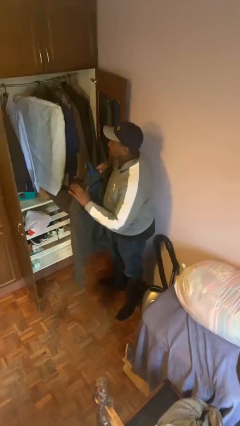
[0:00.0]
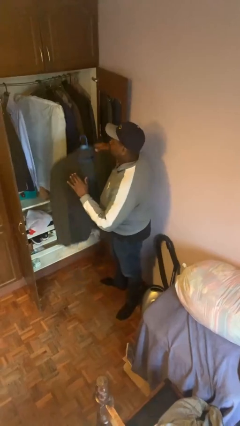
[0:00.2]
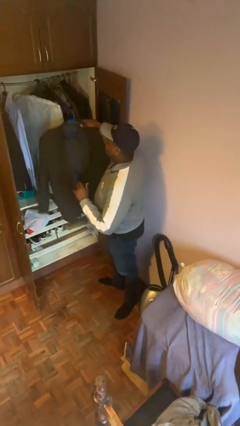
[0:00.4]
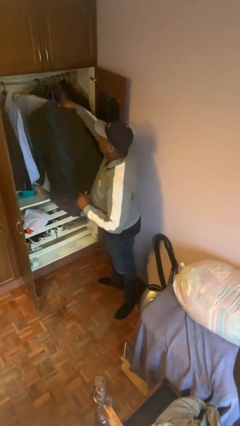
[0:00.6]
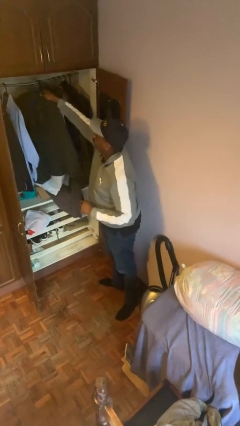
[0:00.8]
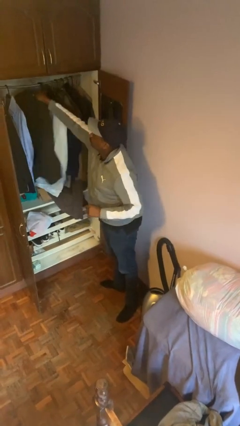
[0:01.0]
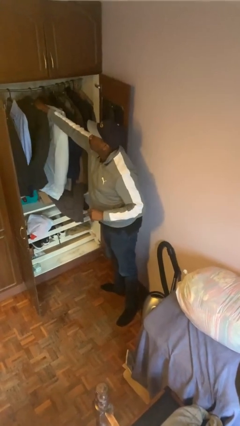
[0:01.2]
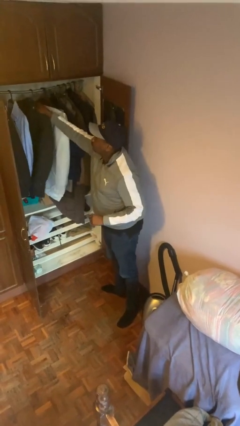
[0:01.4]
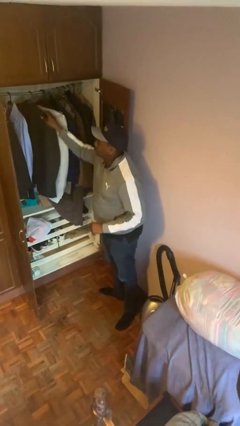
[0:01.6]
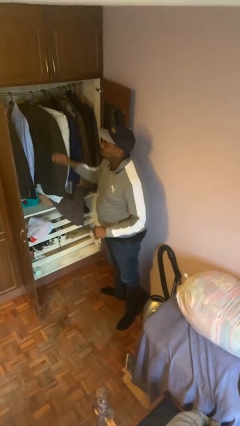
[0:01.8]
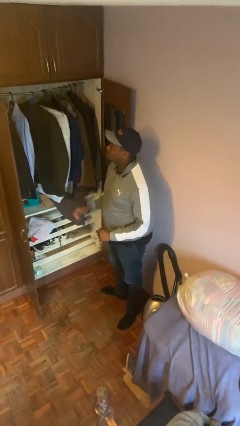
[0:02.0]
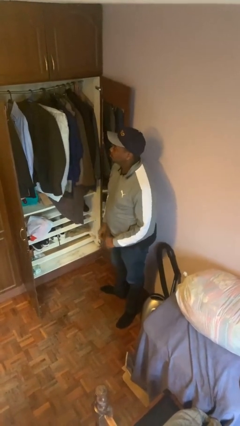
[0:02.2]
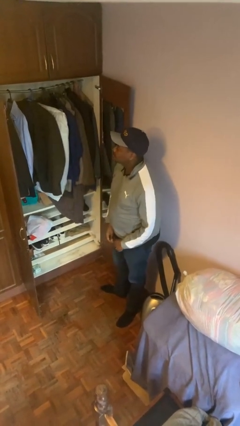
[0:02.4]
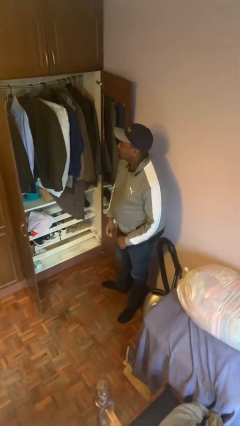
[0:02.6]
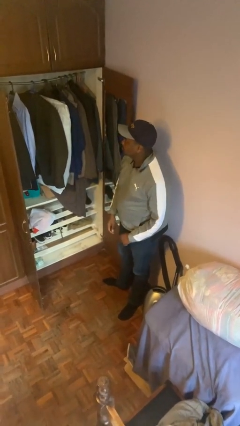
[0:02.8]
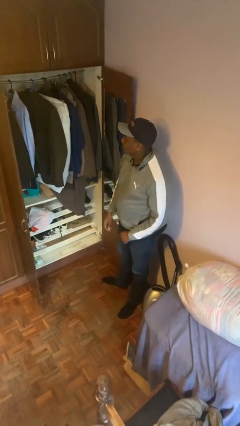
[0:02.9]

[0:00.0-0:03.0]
person puts clothes into closet

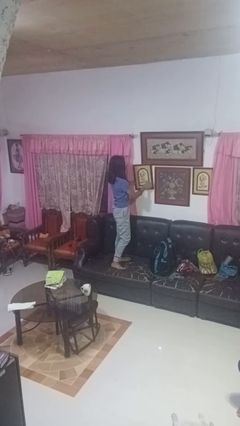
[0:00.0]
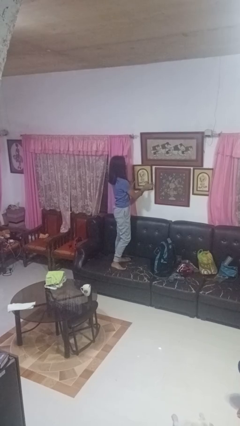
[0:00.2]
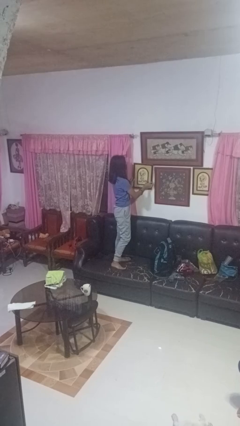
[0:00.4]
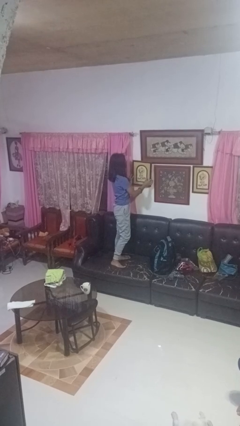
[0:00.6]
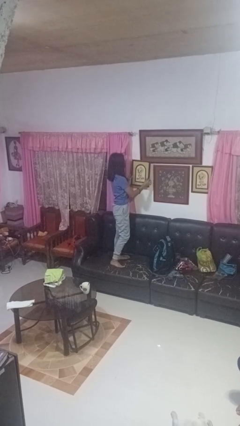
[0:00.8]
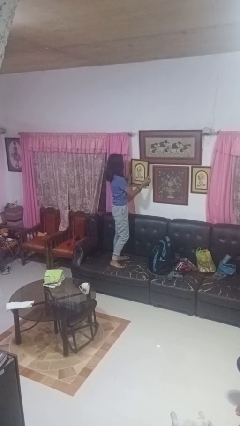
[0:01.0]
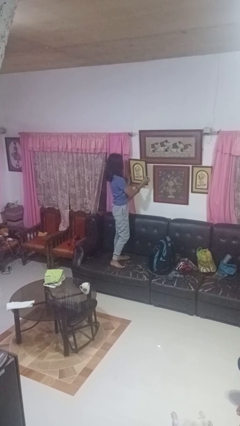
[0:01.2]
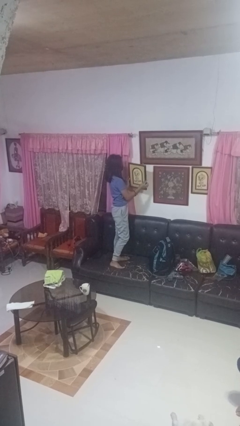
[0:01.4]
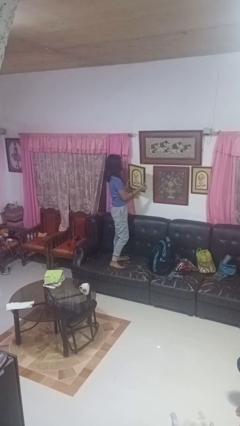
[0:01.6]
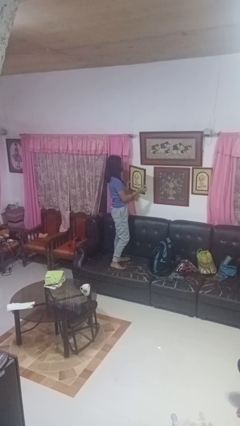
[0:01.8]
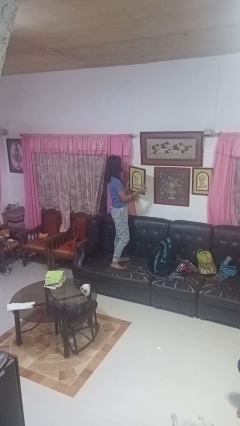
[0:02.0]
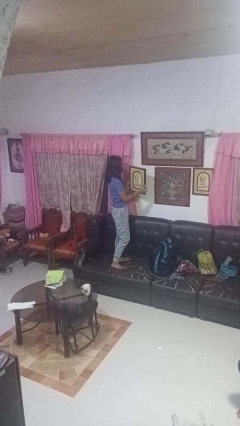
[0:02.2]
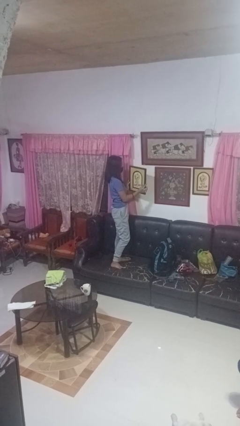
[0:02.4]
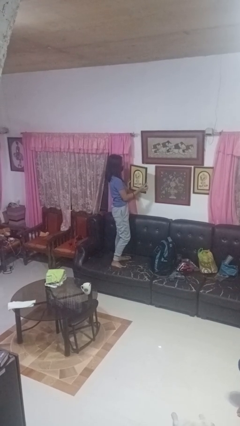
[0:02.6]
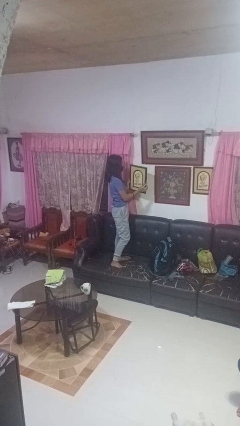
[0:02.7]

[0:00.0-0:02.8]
person takes down picture frame

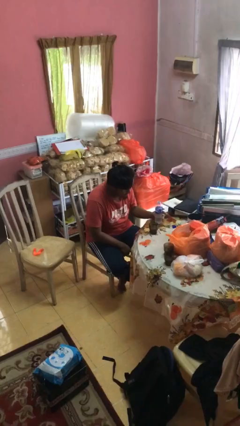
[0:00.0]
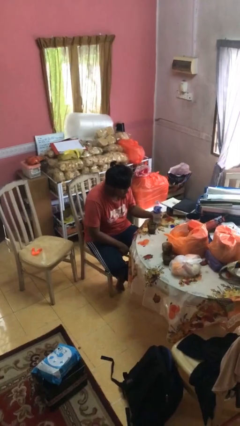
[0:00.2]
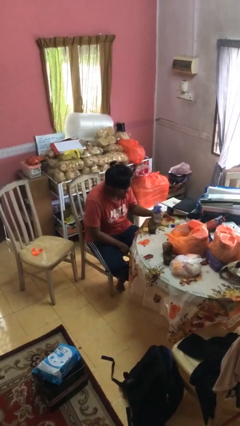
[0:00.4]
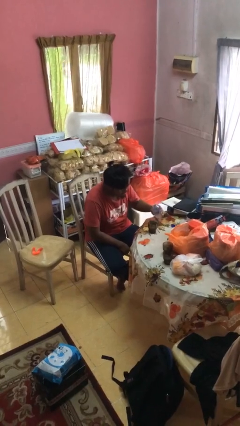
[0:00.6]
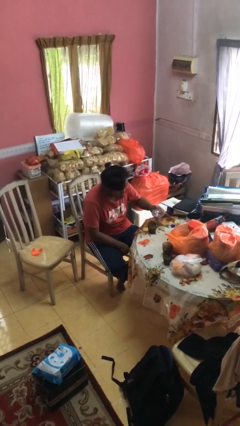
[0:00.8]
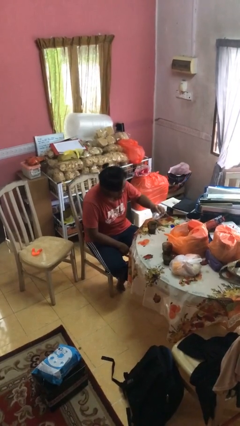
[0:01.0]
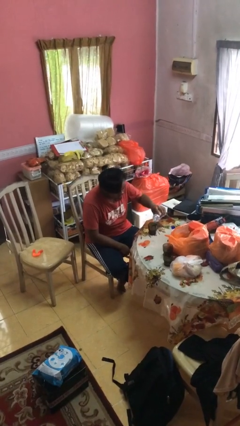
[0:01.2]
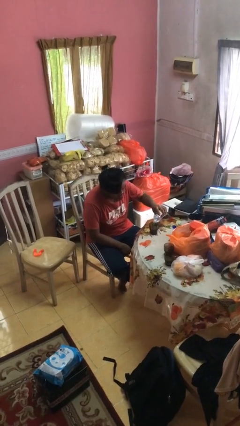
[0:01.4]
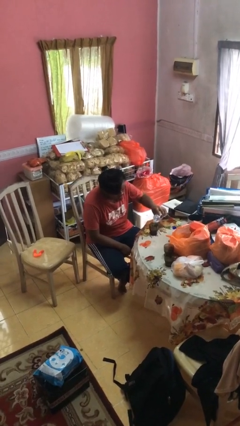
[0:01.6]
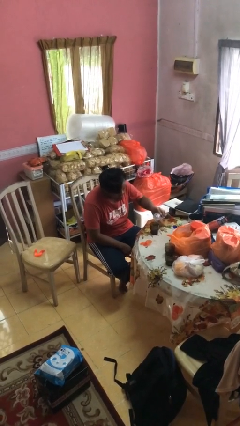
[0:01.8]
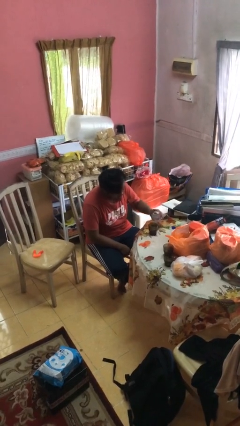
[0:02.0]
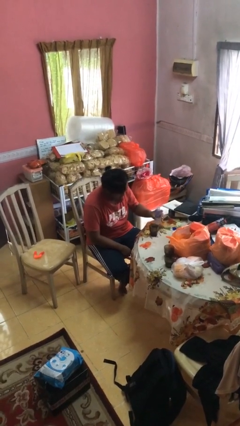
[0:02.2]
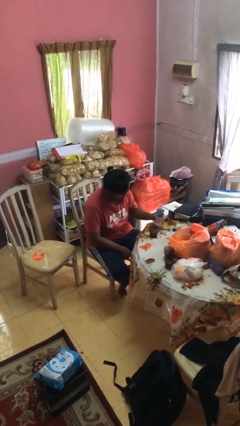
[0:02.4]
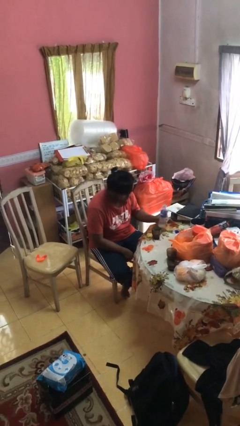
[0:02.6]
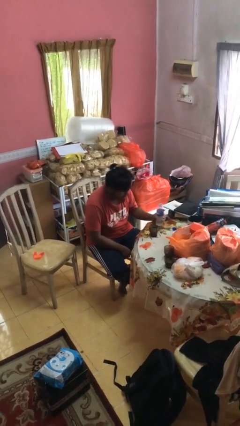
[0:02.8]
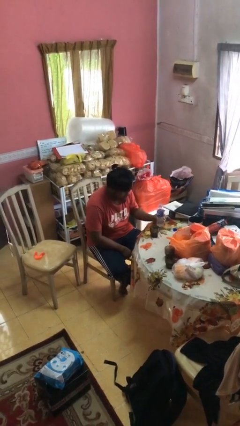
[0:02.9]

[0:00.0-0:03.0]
person pours liquid into cup

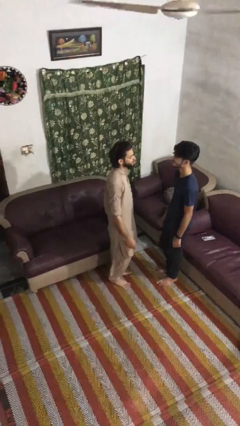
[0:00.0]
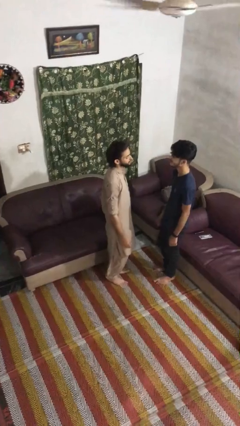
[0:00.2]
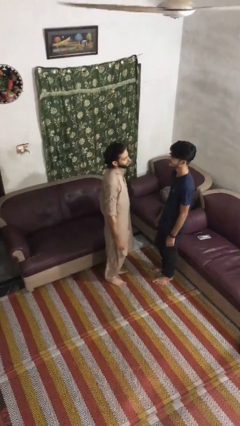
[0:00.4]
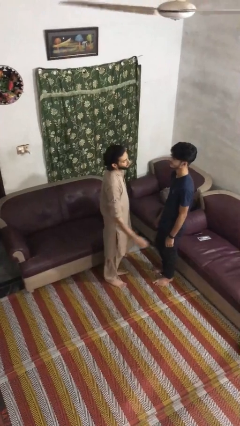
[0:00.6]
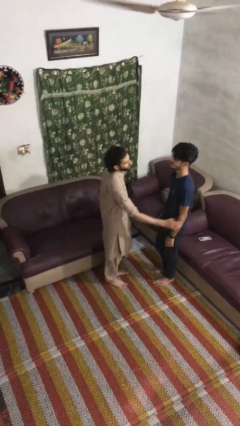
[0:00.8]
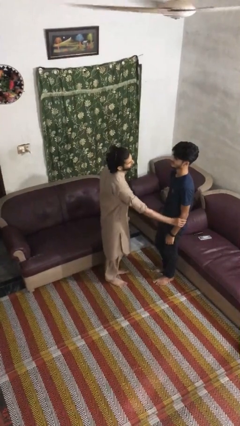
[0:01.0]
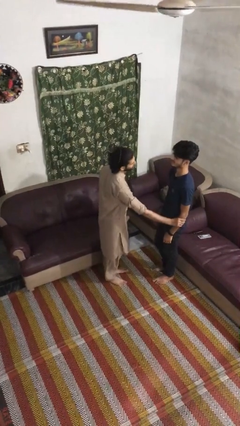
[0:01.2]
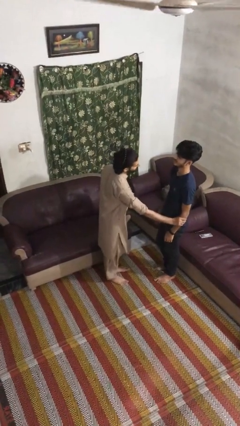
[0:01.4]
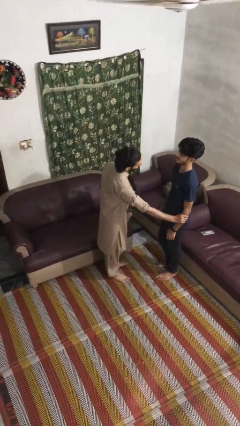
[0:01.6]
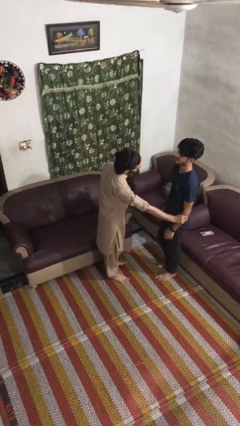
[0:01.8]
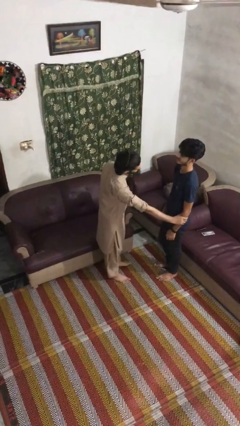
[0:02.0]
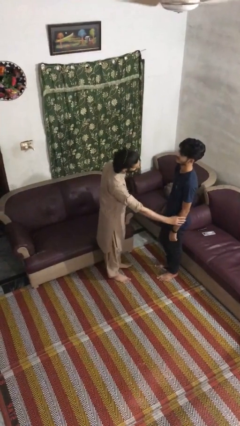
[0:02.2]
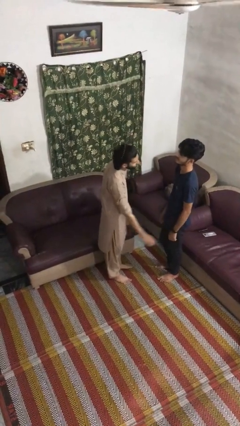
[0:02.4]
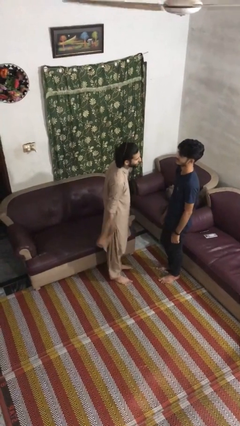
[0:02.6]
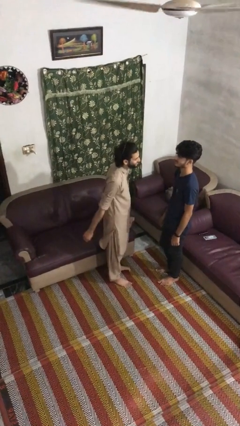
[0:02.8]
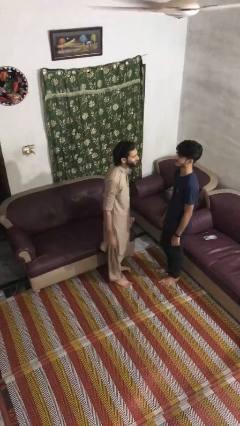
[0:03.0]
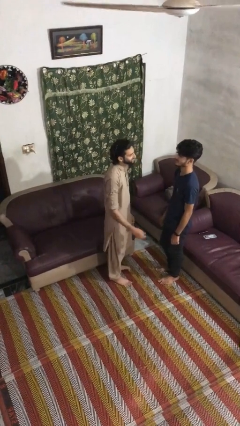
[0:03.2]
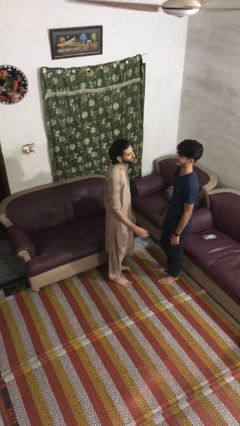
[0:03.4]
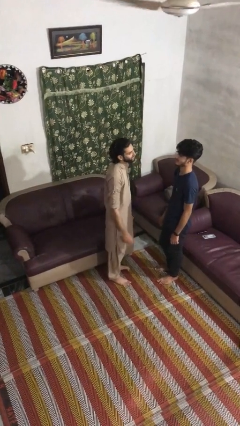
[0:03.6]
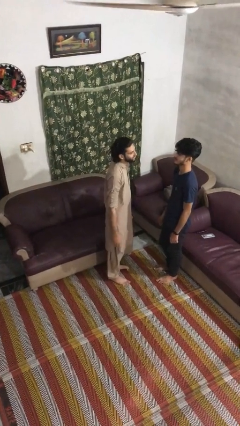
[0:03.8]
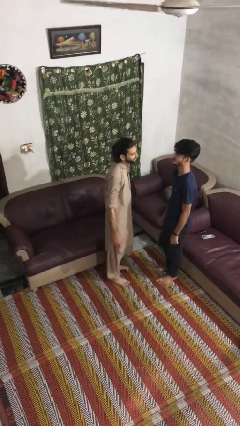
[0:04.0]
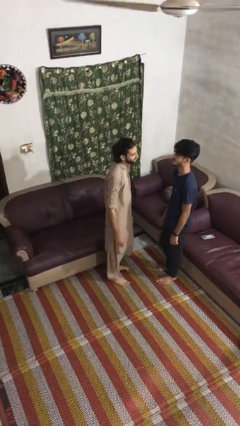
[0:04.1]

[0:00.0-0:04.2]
person grabs person by forearm

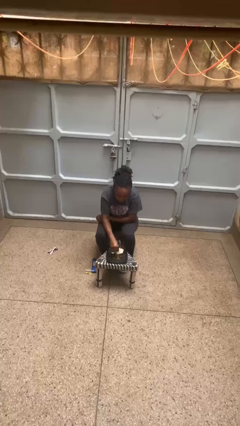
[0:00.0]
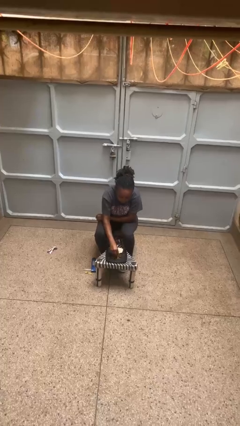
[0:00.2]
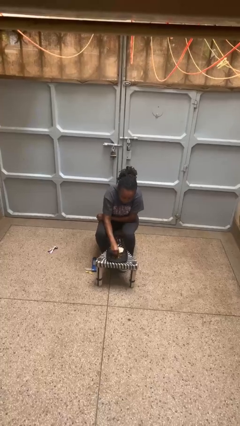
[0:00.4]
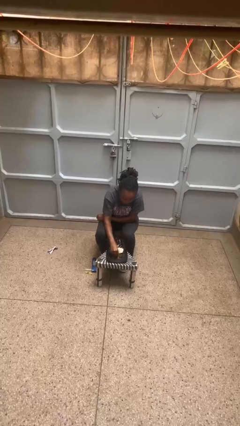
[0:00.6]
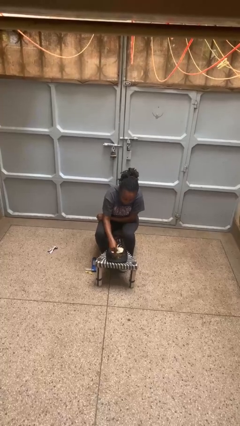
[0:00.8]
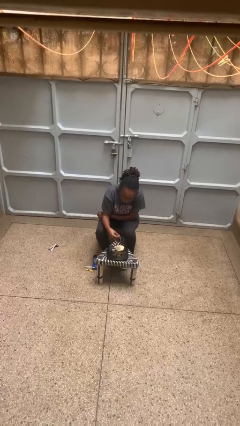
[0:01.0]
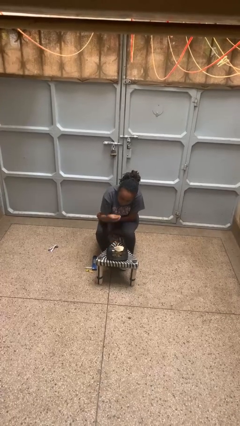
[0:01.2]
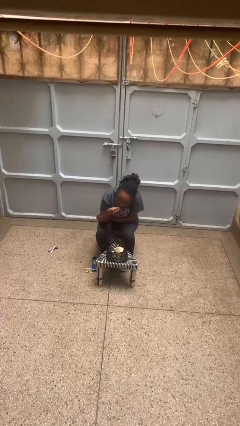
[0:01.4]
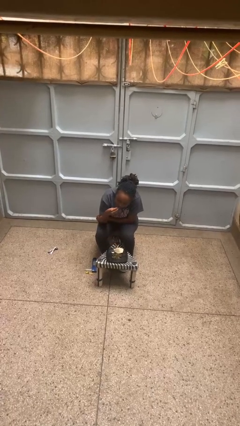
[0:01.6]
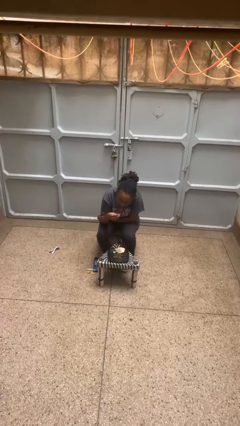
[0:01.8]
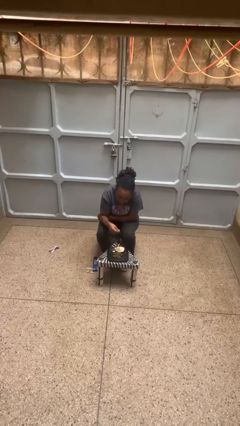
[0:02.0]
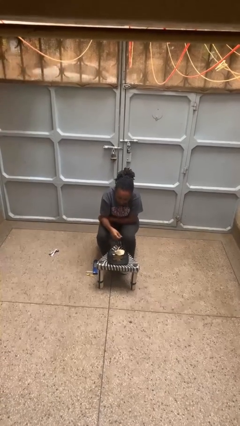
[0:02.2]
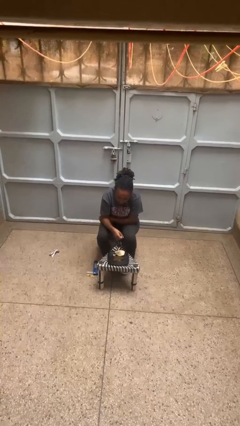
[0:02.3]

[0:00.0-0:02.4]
person eats with hands

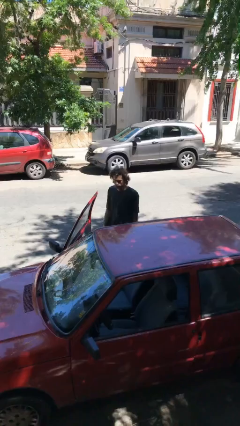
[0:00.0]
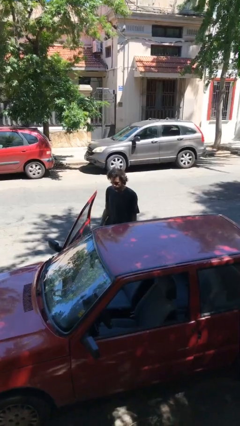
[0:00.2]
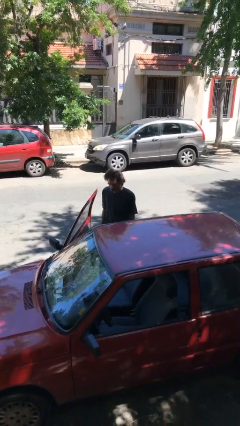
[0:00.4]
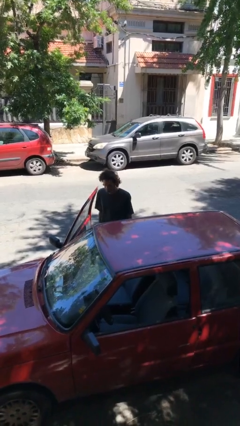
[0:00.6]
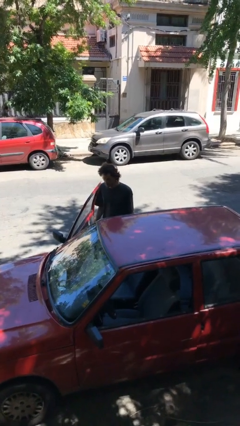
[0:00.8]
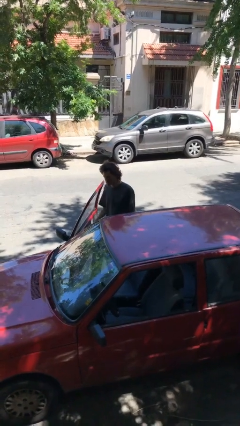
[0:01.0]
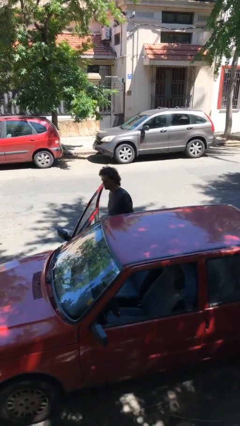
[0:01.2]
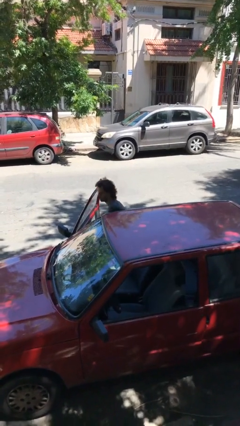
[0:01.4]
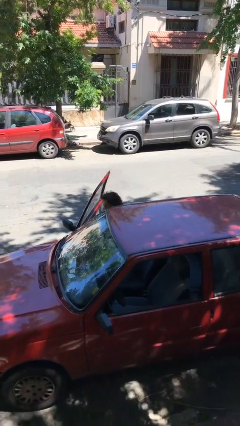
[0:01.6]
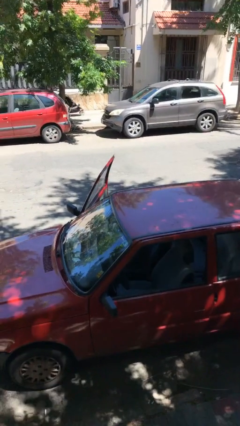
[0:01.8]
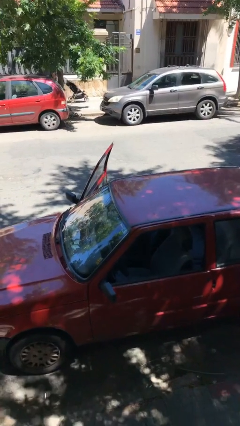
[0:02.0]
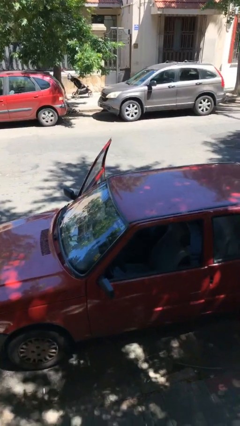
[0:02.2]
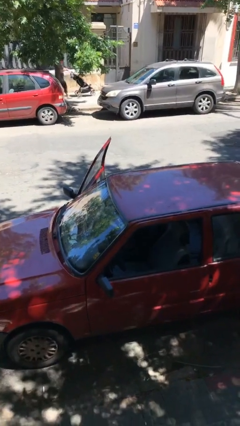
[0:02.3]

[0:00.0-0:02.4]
person enters car
